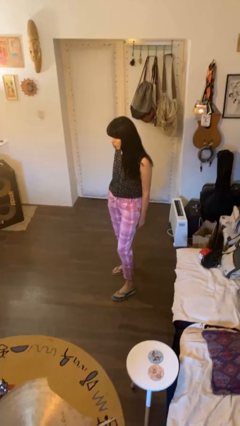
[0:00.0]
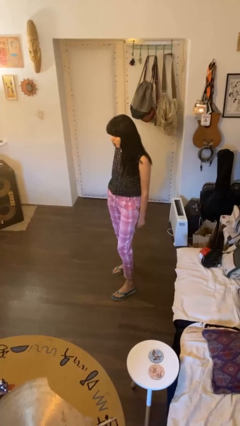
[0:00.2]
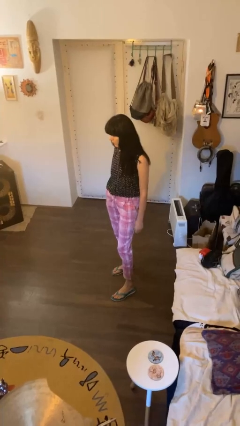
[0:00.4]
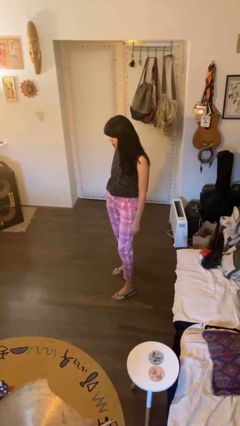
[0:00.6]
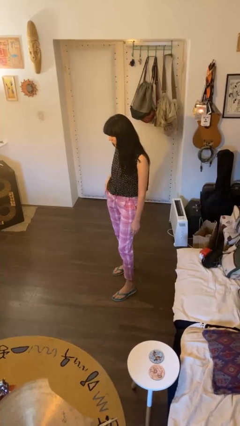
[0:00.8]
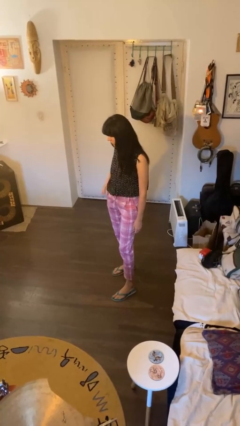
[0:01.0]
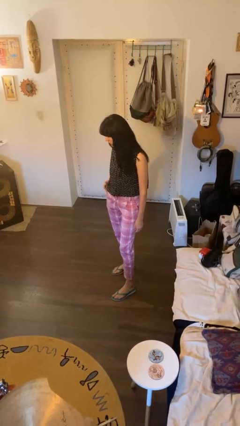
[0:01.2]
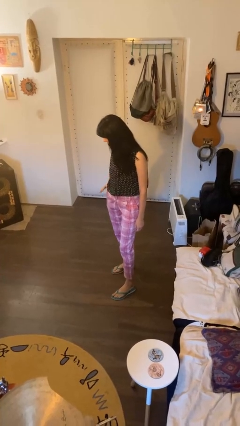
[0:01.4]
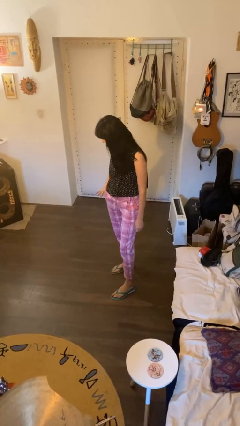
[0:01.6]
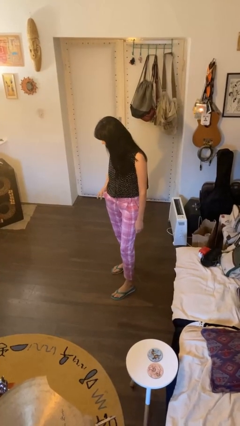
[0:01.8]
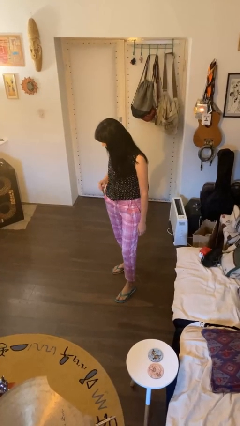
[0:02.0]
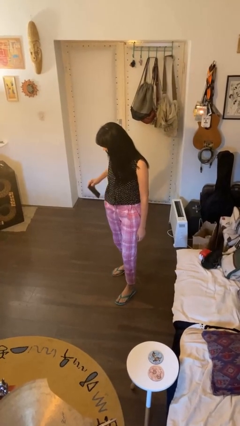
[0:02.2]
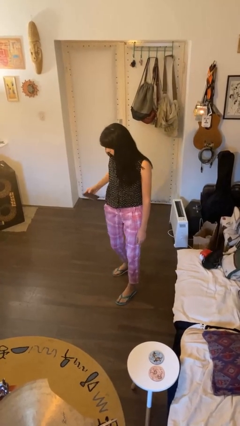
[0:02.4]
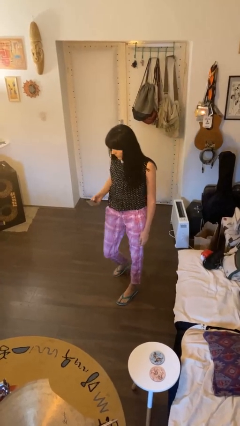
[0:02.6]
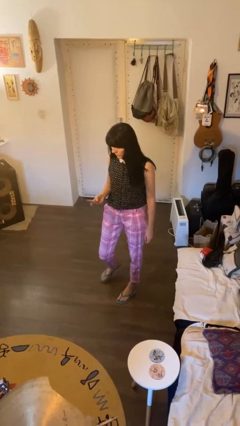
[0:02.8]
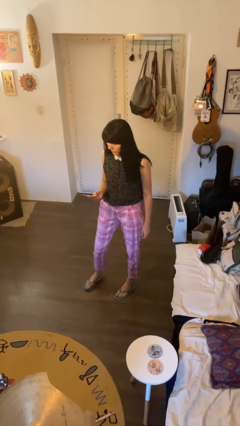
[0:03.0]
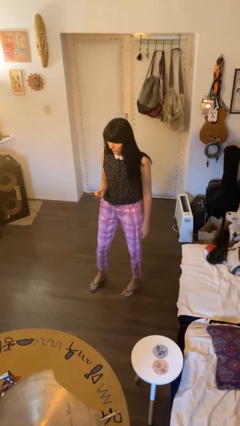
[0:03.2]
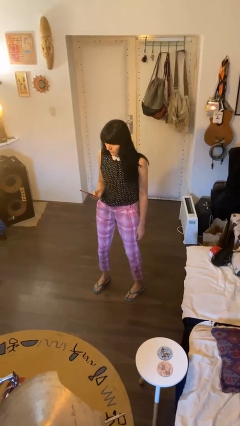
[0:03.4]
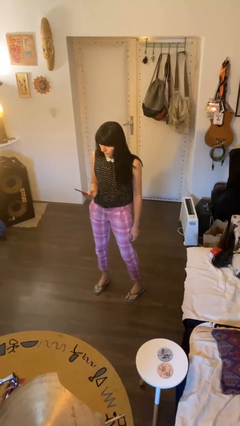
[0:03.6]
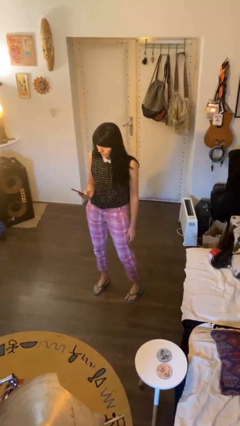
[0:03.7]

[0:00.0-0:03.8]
person takes phone from pocket

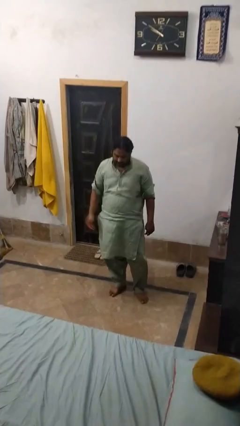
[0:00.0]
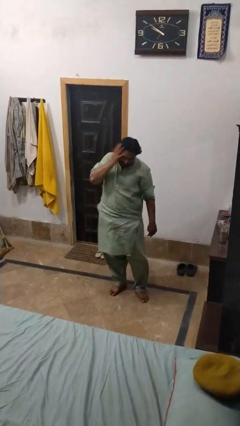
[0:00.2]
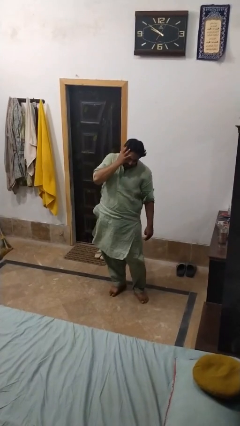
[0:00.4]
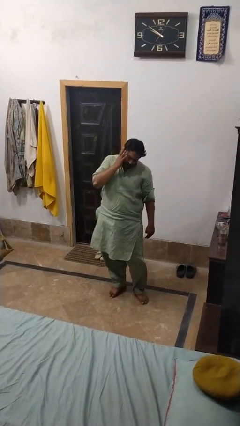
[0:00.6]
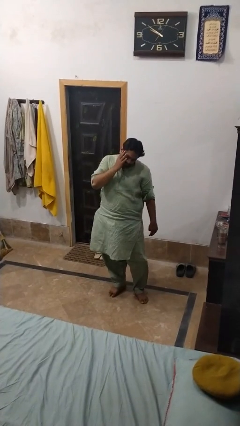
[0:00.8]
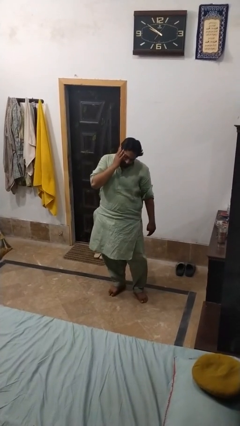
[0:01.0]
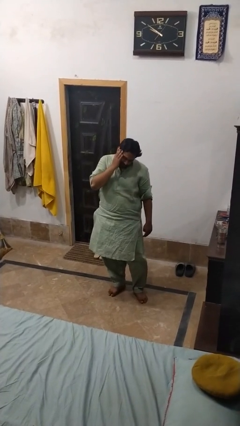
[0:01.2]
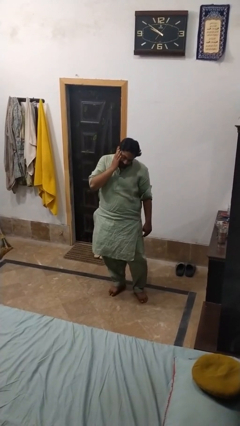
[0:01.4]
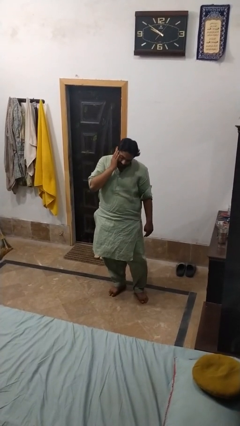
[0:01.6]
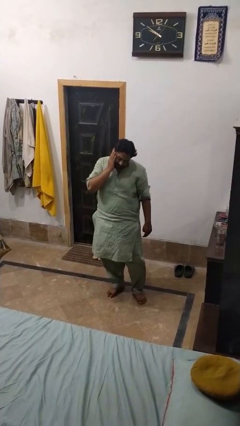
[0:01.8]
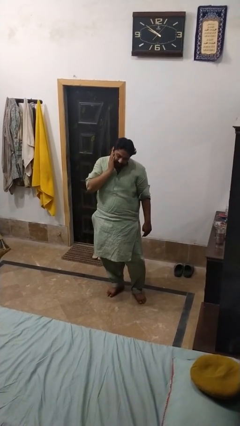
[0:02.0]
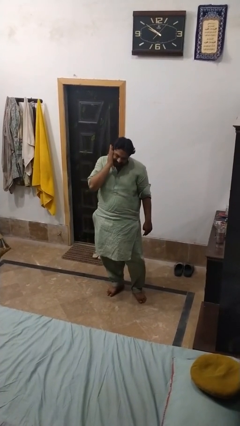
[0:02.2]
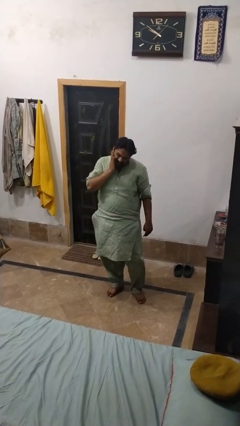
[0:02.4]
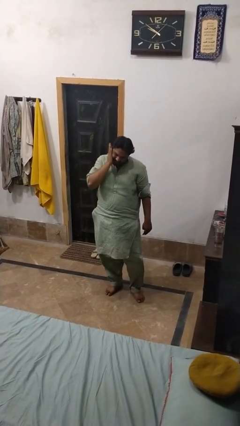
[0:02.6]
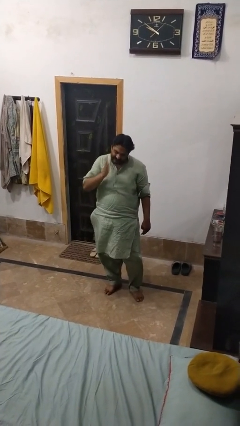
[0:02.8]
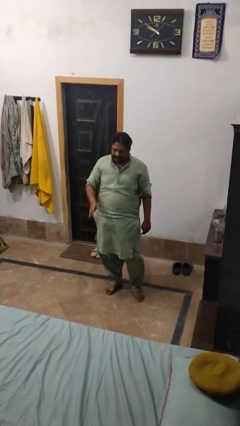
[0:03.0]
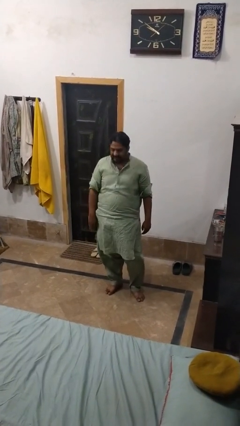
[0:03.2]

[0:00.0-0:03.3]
person swats bug

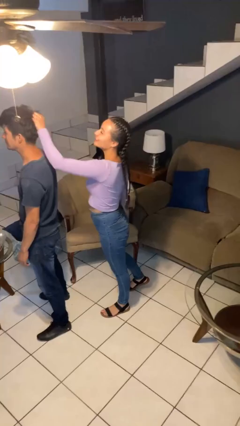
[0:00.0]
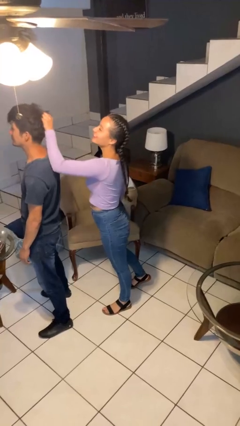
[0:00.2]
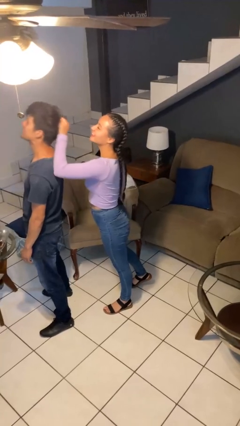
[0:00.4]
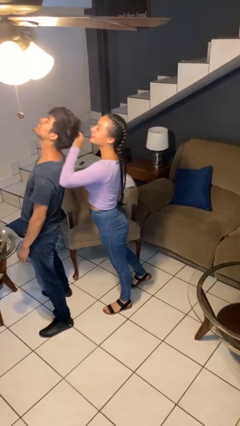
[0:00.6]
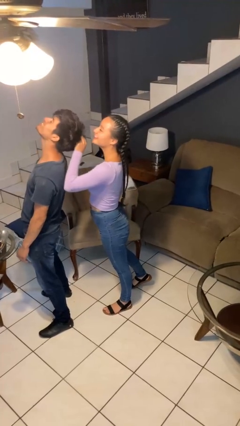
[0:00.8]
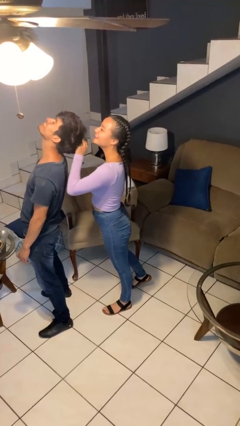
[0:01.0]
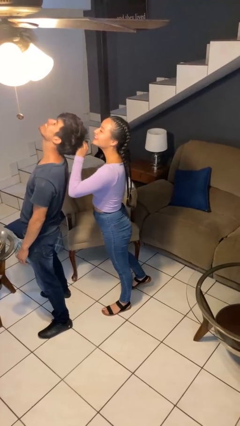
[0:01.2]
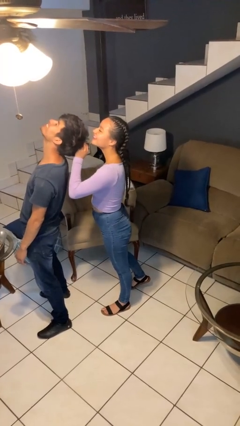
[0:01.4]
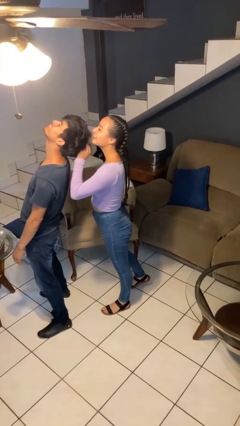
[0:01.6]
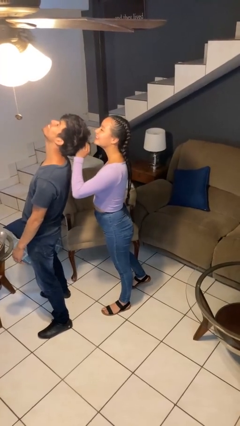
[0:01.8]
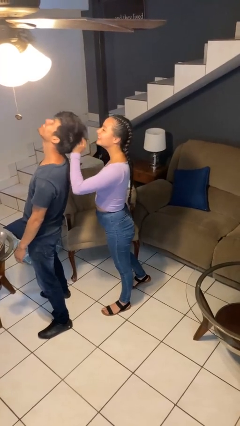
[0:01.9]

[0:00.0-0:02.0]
person grabs person by hair

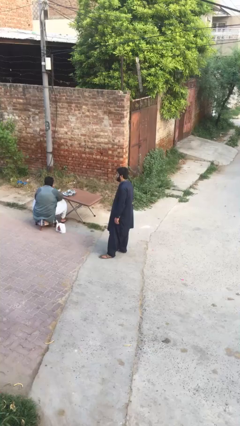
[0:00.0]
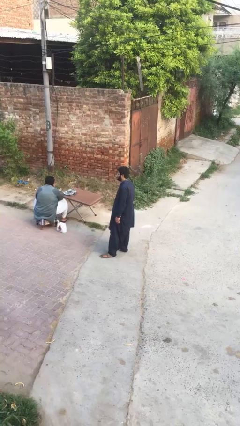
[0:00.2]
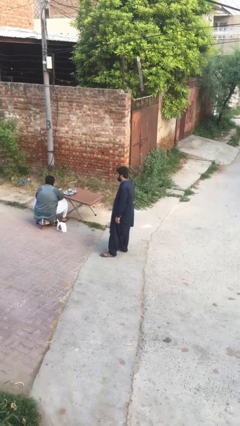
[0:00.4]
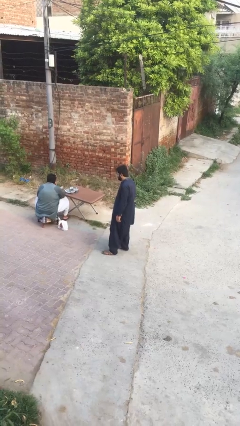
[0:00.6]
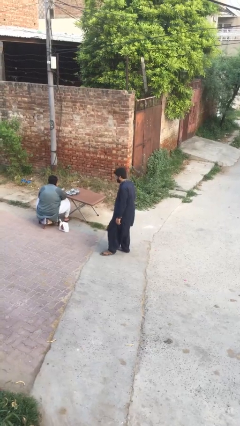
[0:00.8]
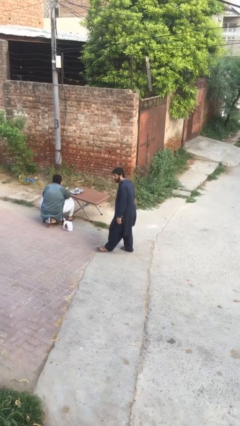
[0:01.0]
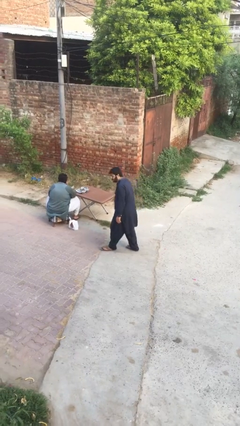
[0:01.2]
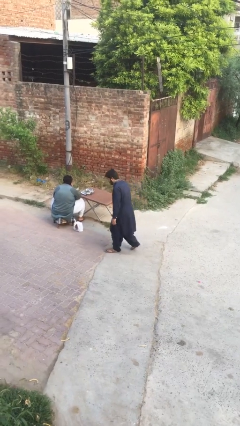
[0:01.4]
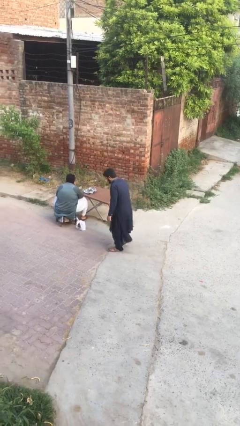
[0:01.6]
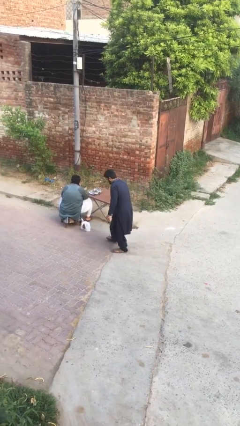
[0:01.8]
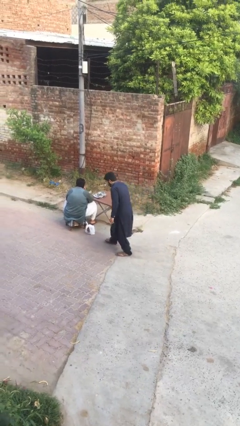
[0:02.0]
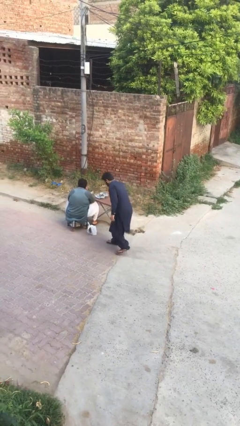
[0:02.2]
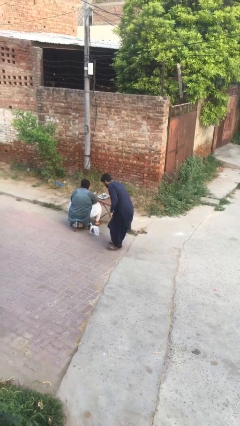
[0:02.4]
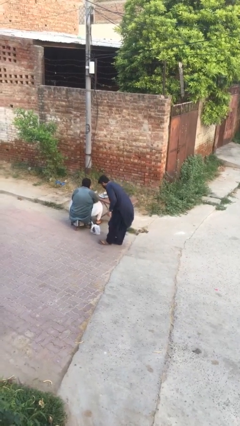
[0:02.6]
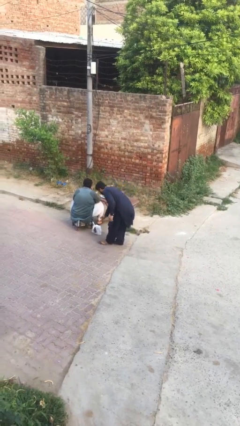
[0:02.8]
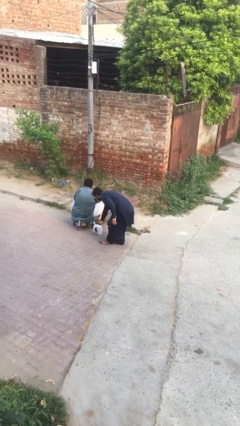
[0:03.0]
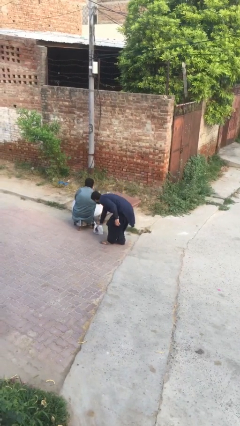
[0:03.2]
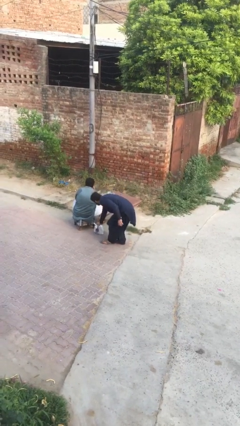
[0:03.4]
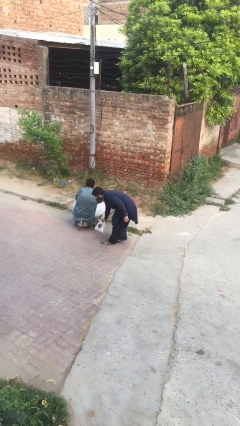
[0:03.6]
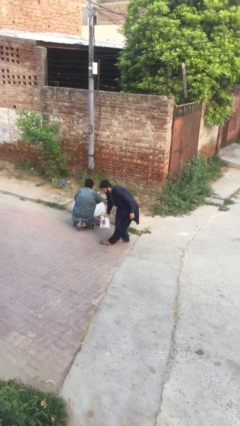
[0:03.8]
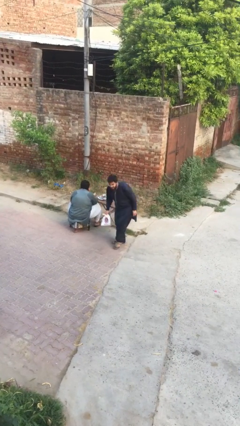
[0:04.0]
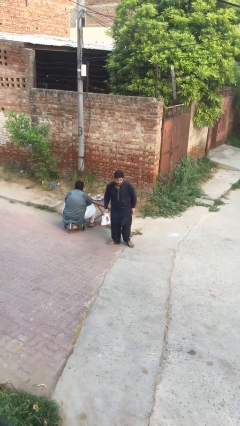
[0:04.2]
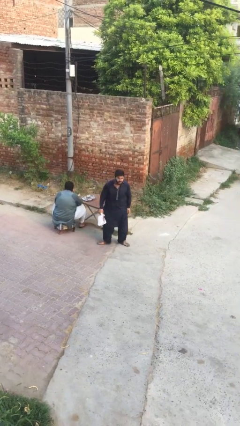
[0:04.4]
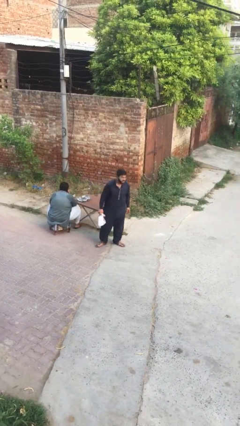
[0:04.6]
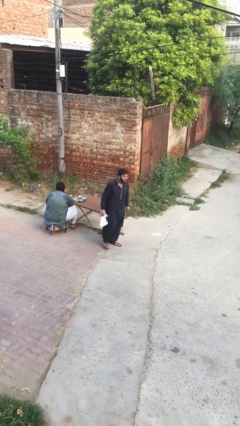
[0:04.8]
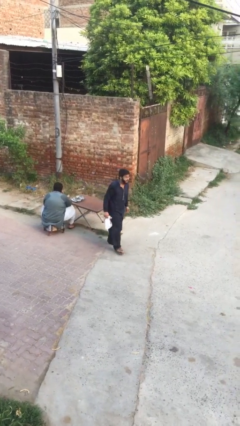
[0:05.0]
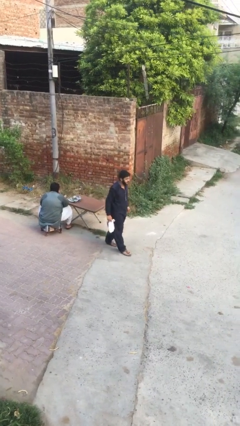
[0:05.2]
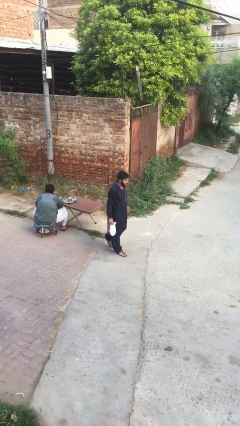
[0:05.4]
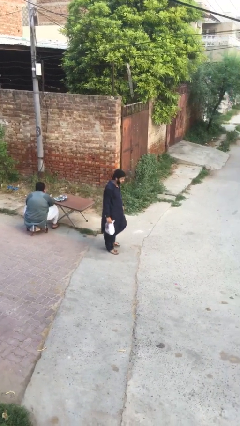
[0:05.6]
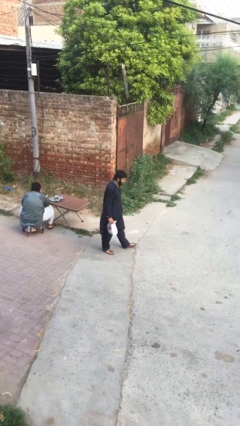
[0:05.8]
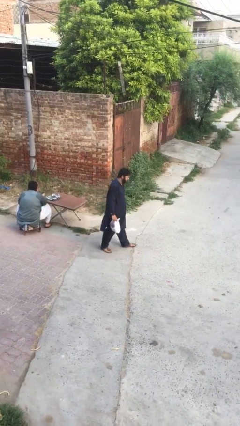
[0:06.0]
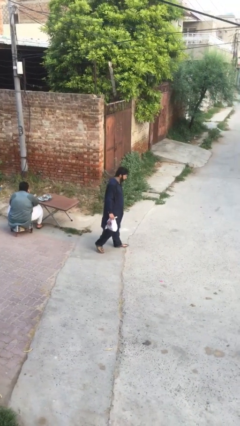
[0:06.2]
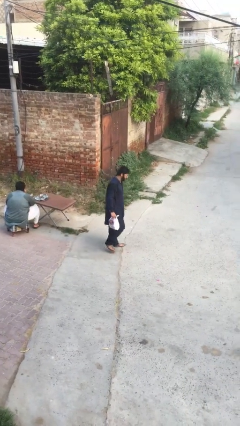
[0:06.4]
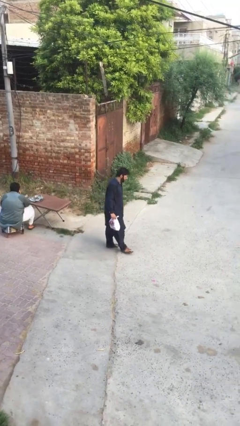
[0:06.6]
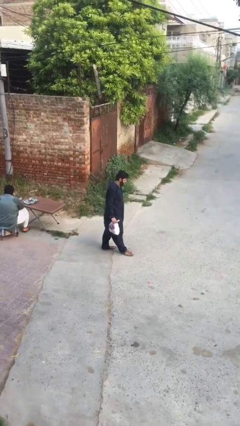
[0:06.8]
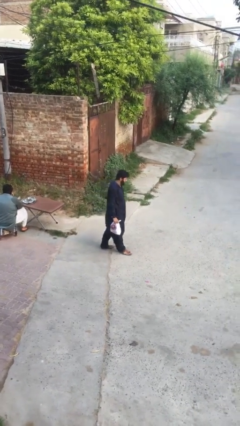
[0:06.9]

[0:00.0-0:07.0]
person steals object from person

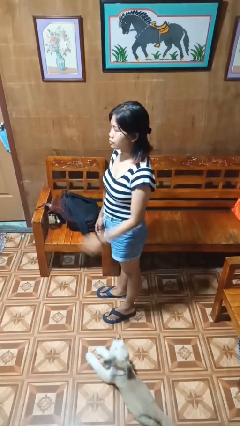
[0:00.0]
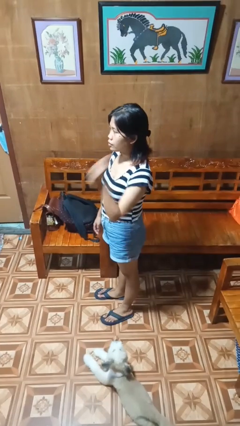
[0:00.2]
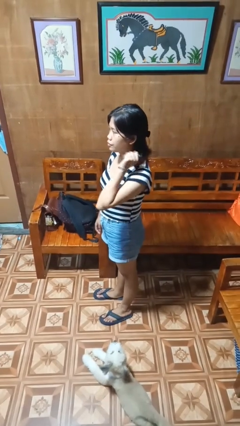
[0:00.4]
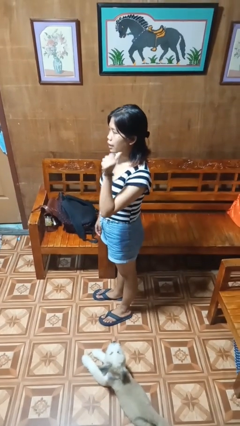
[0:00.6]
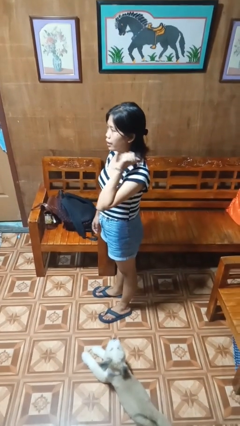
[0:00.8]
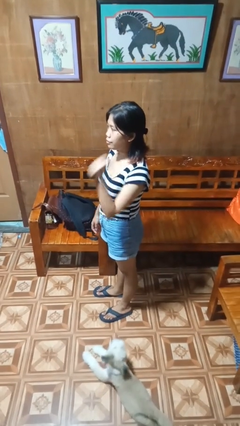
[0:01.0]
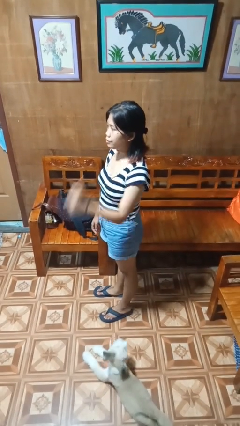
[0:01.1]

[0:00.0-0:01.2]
person gestures behind me

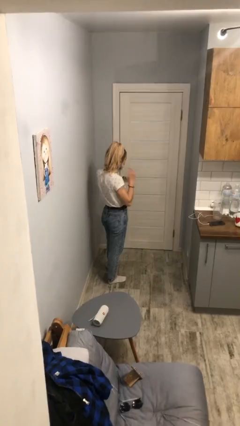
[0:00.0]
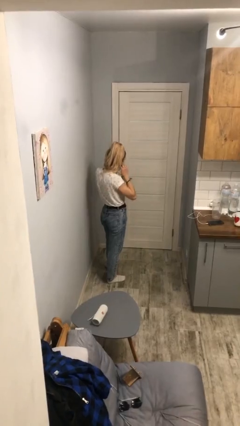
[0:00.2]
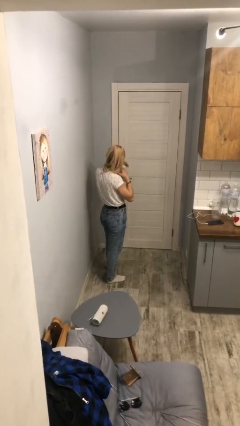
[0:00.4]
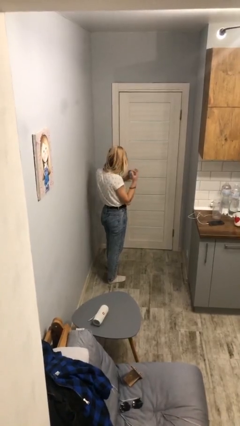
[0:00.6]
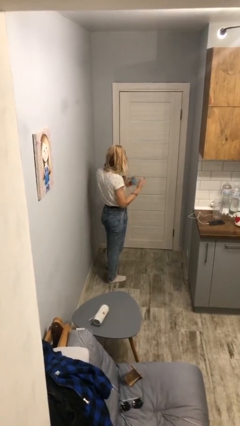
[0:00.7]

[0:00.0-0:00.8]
person takes off facemask
